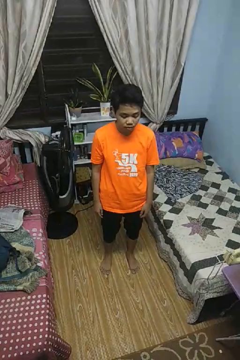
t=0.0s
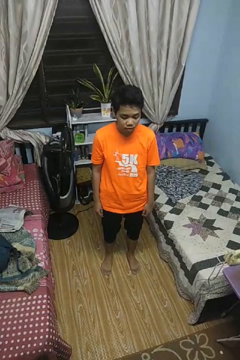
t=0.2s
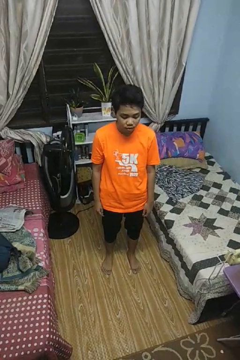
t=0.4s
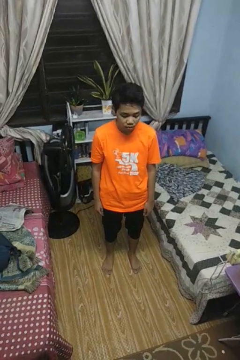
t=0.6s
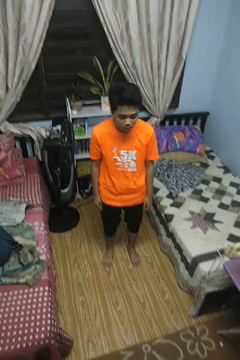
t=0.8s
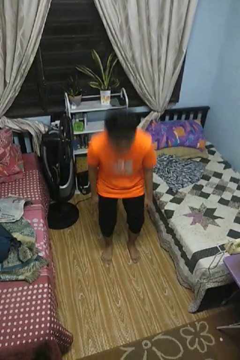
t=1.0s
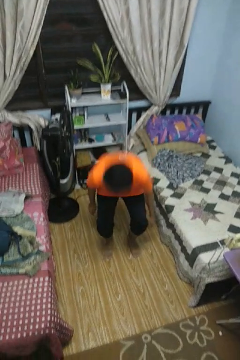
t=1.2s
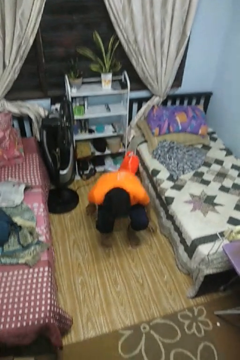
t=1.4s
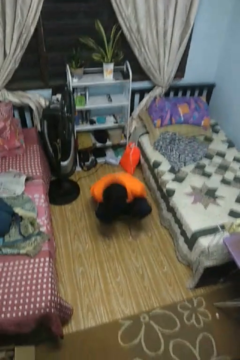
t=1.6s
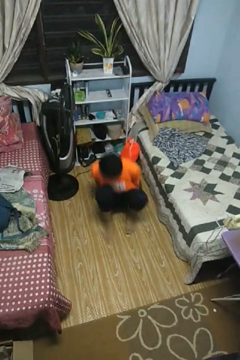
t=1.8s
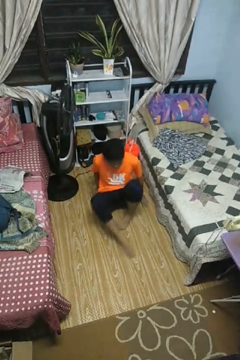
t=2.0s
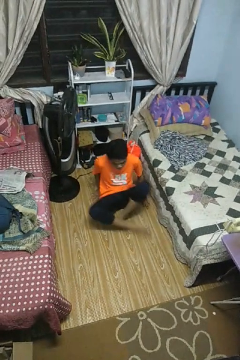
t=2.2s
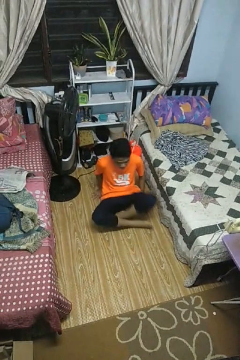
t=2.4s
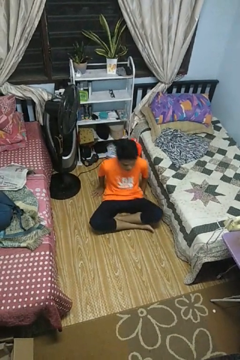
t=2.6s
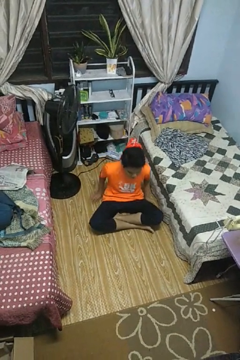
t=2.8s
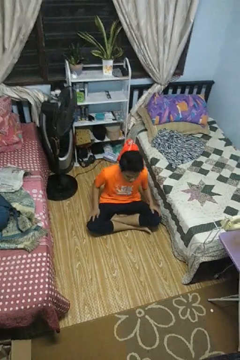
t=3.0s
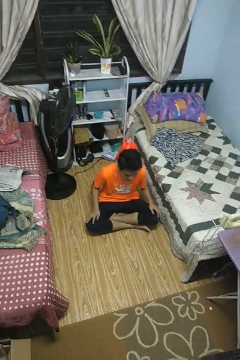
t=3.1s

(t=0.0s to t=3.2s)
person sits crisscross

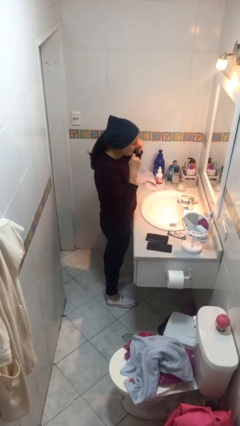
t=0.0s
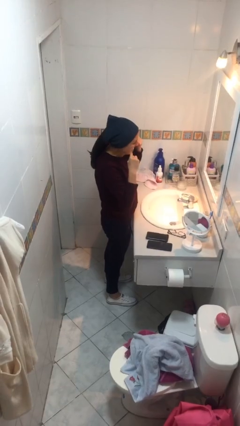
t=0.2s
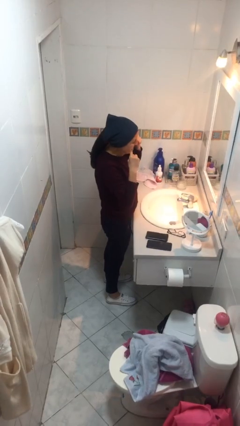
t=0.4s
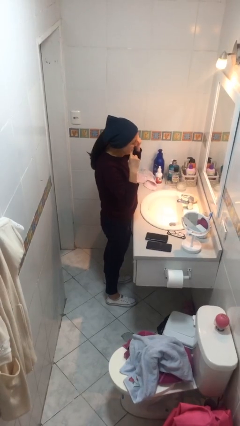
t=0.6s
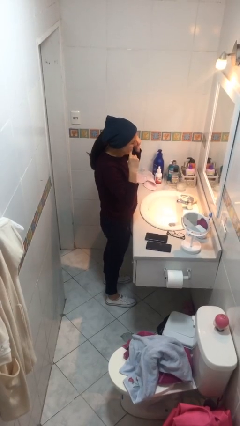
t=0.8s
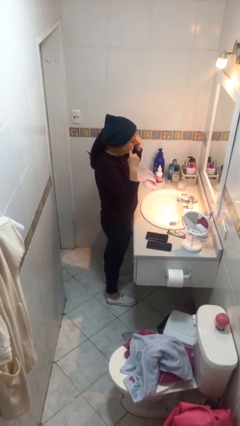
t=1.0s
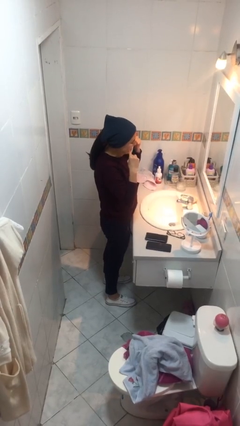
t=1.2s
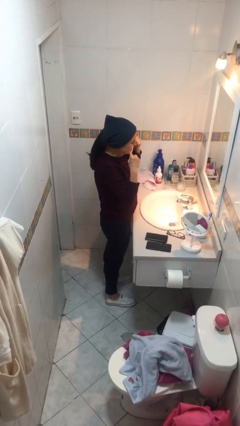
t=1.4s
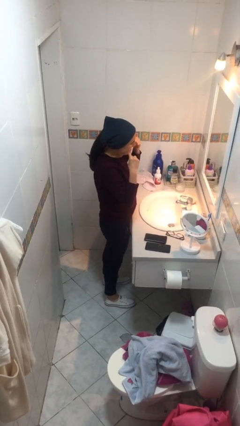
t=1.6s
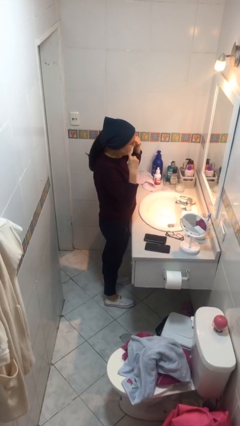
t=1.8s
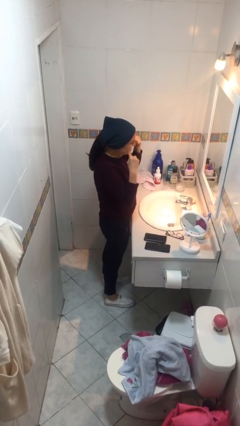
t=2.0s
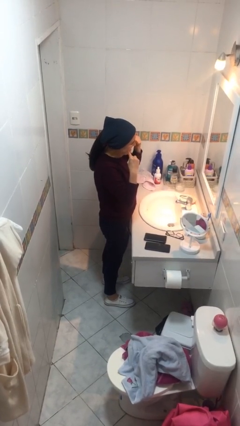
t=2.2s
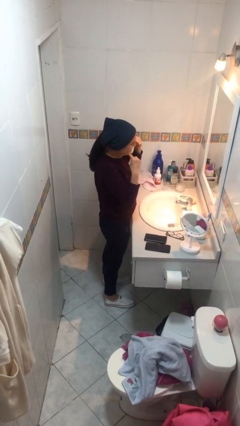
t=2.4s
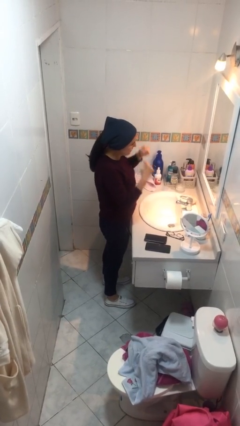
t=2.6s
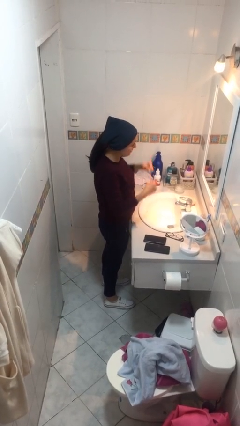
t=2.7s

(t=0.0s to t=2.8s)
person flosses

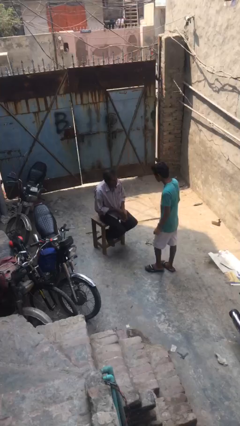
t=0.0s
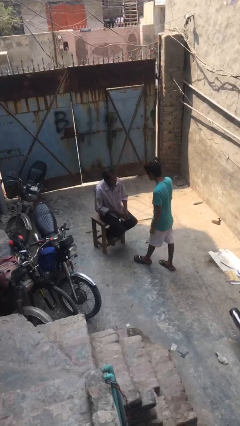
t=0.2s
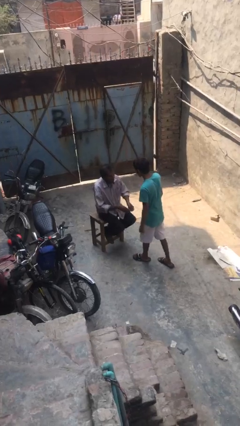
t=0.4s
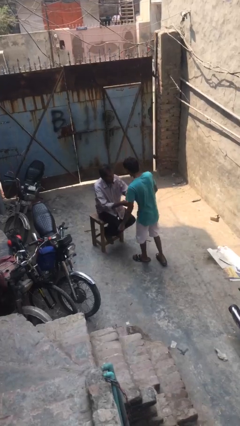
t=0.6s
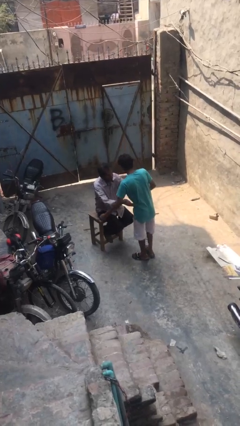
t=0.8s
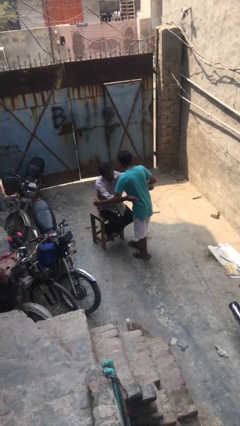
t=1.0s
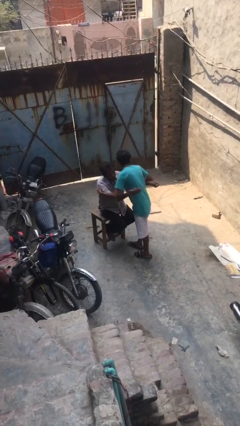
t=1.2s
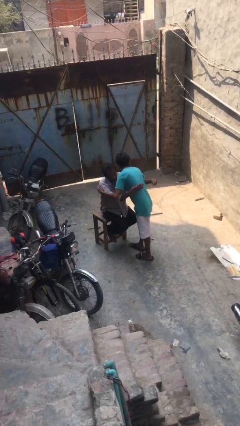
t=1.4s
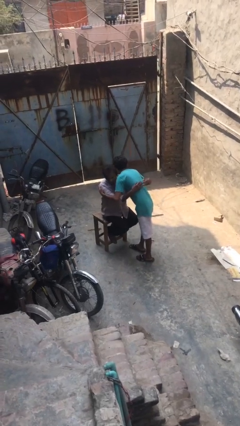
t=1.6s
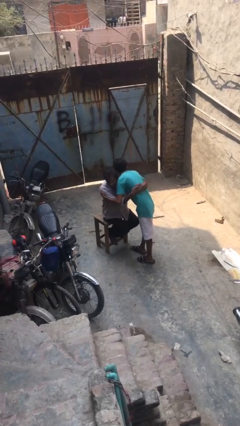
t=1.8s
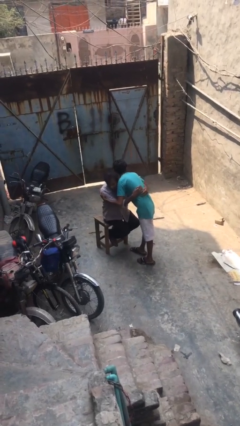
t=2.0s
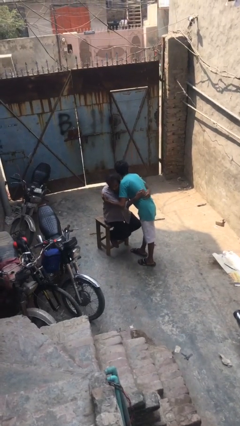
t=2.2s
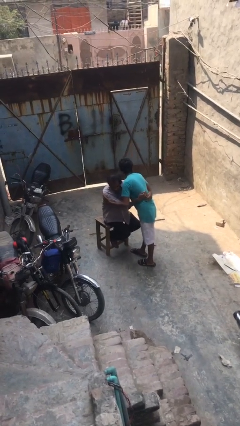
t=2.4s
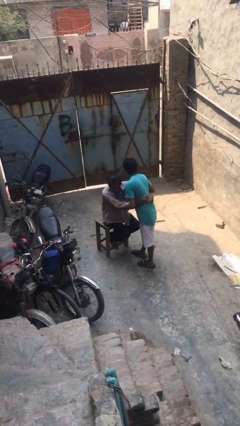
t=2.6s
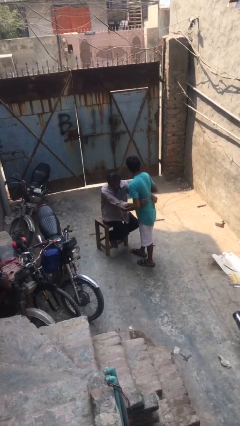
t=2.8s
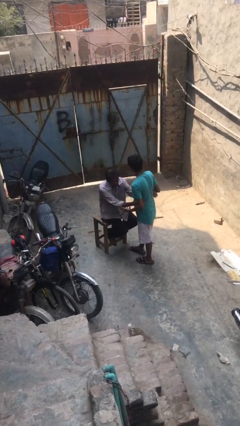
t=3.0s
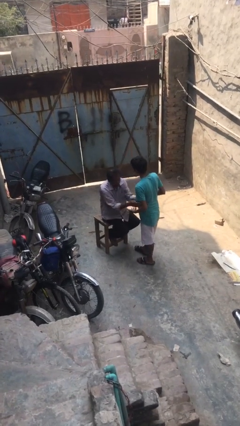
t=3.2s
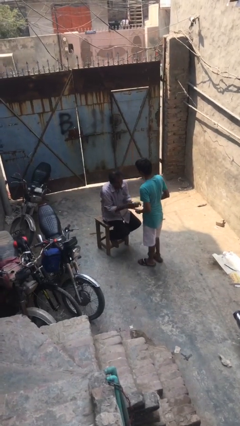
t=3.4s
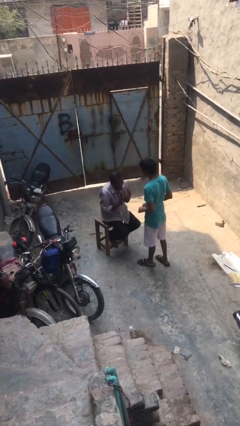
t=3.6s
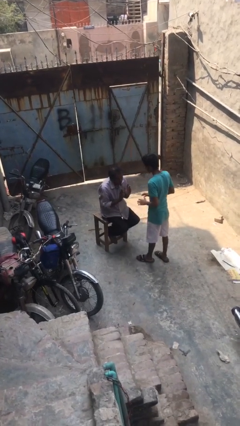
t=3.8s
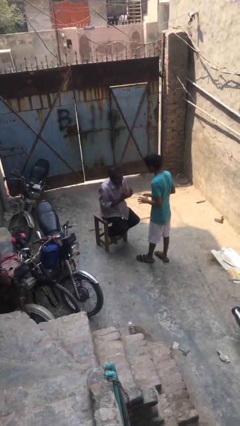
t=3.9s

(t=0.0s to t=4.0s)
person embraces person

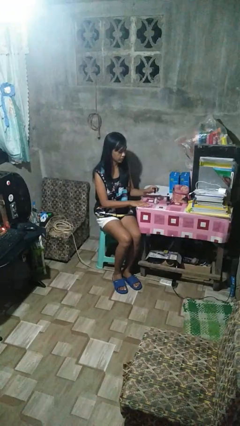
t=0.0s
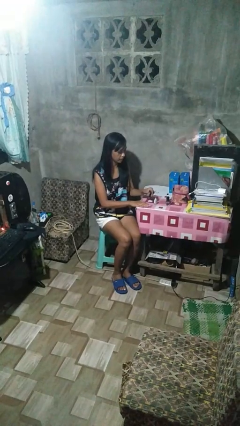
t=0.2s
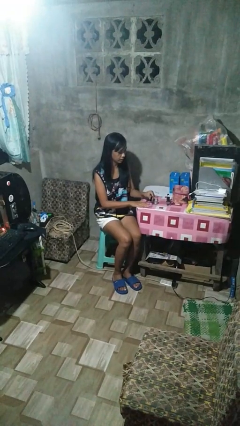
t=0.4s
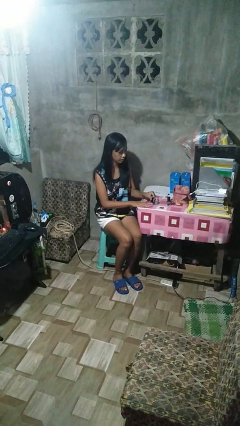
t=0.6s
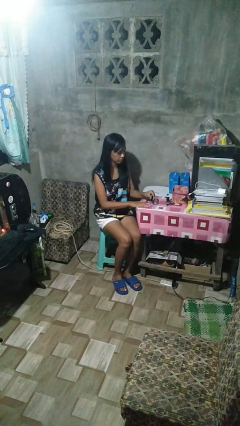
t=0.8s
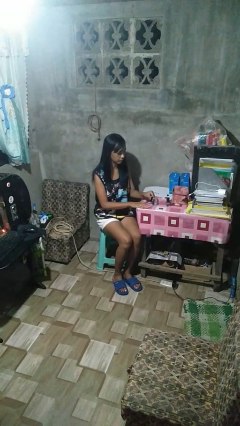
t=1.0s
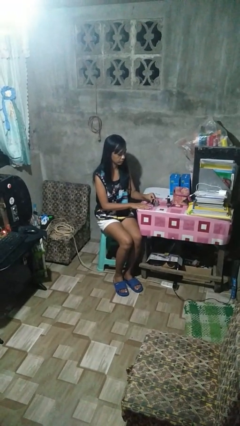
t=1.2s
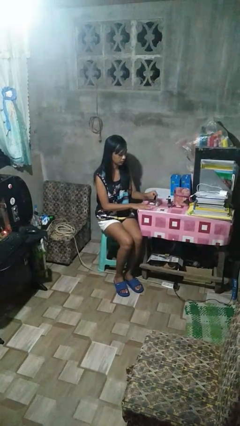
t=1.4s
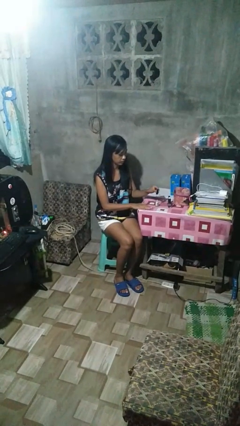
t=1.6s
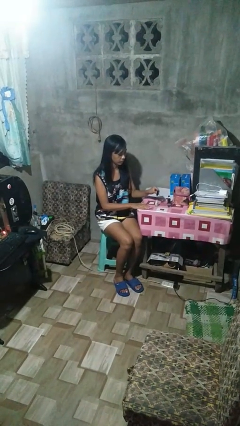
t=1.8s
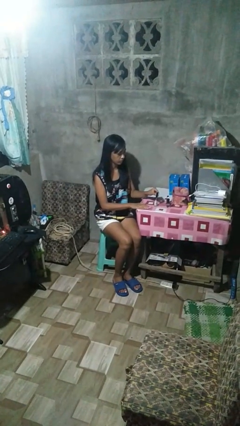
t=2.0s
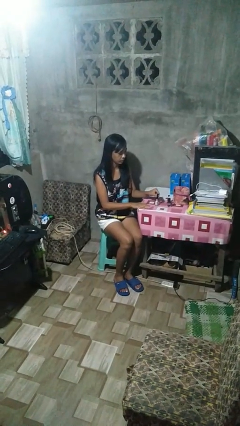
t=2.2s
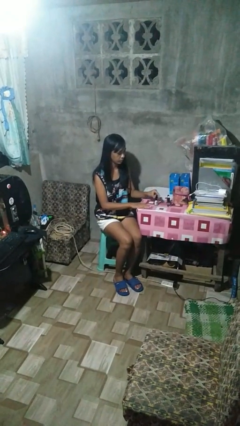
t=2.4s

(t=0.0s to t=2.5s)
person paints fingernails

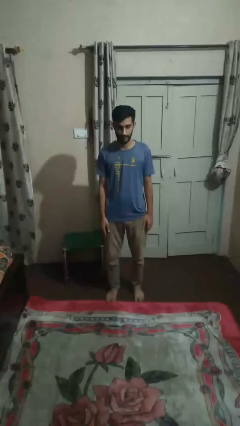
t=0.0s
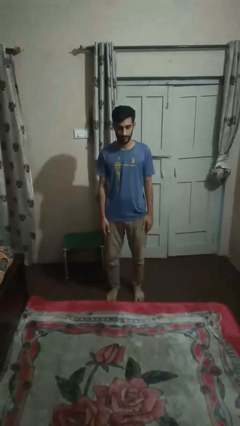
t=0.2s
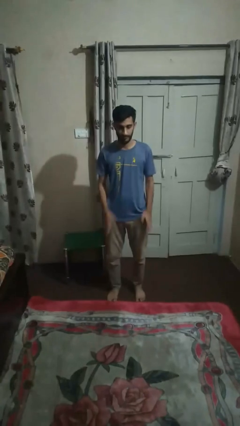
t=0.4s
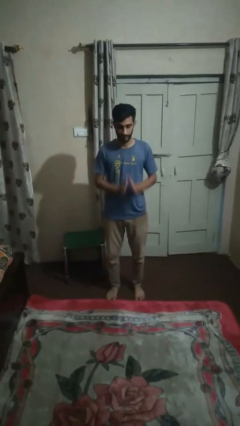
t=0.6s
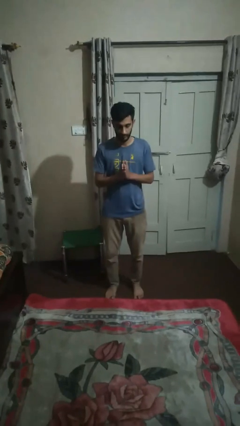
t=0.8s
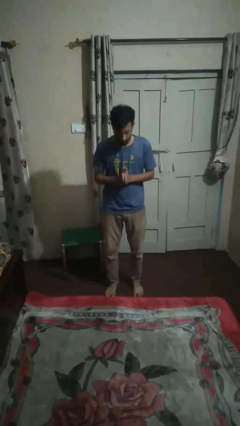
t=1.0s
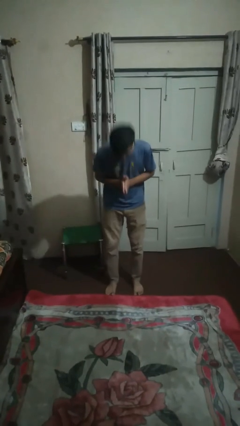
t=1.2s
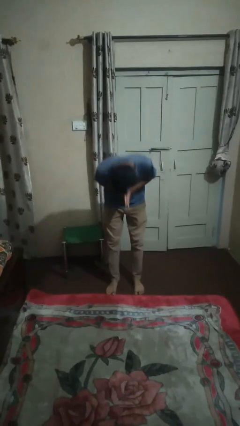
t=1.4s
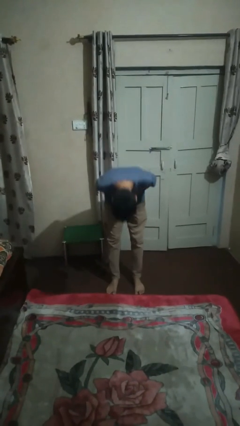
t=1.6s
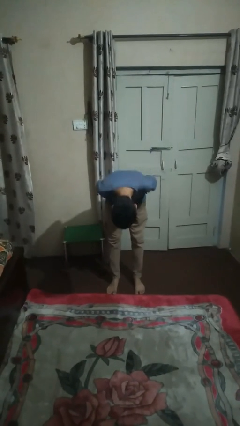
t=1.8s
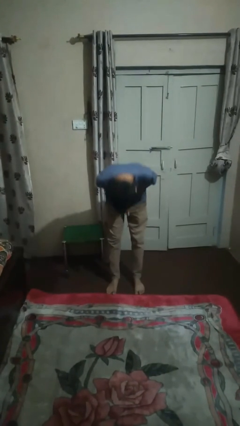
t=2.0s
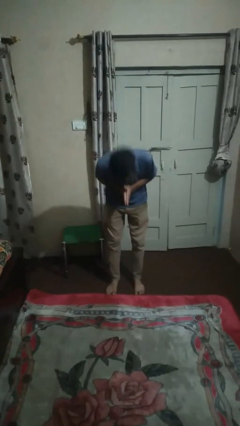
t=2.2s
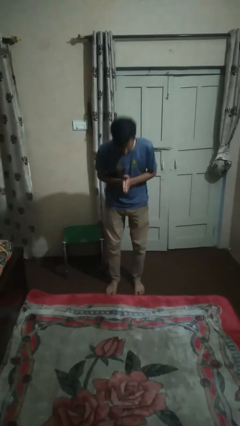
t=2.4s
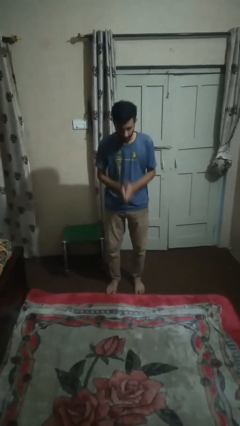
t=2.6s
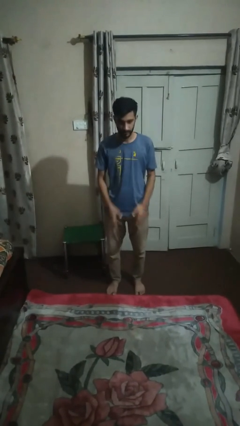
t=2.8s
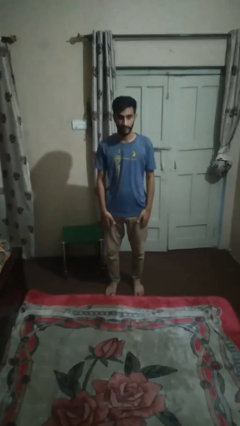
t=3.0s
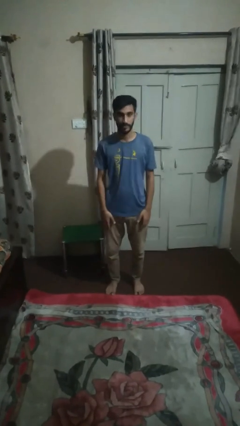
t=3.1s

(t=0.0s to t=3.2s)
person bows

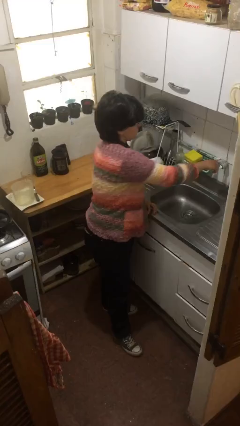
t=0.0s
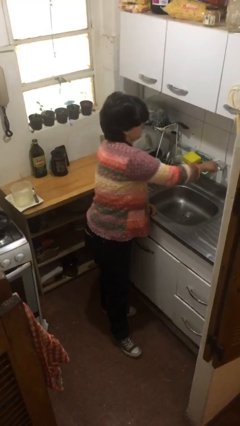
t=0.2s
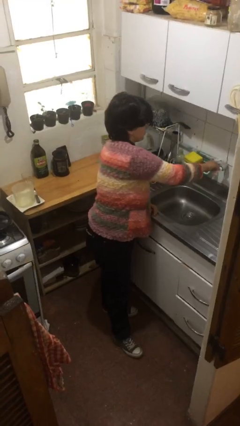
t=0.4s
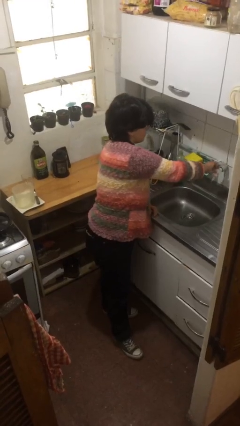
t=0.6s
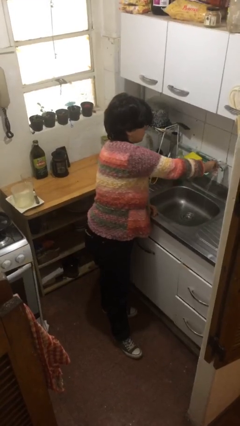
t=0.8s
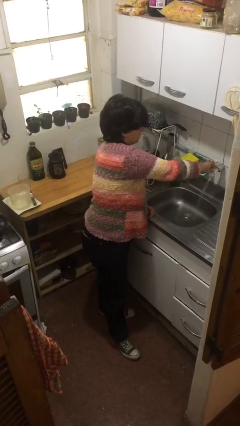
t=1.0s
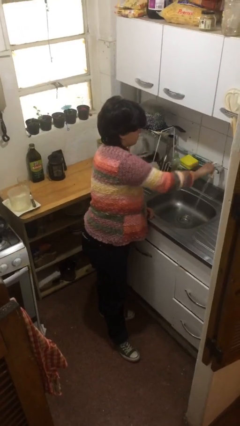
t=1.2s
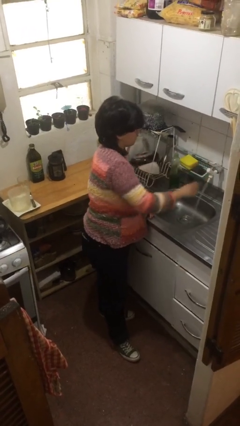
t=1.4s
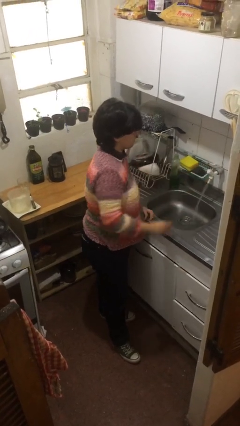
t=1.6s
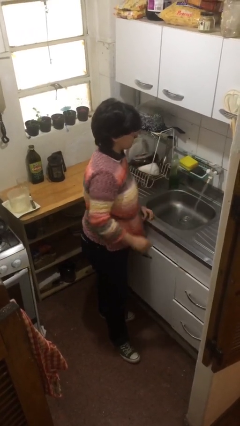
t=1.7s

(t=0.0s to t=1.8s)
person turns on faucet

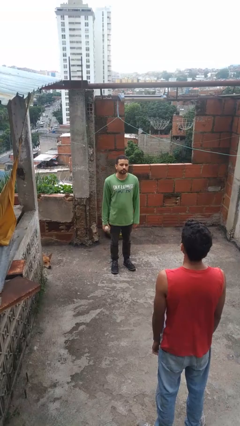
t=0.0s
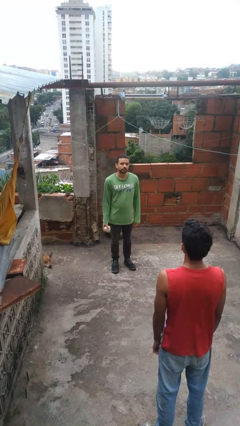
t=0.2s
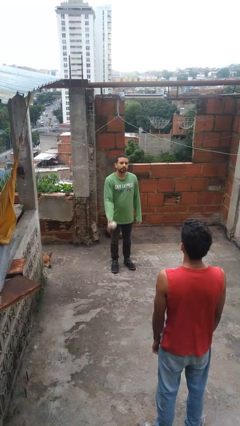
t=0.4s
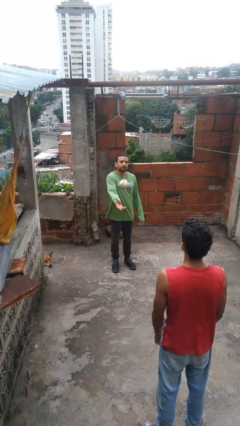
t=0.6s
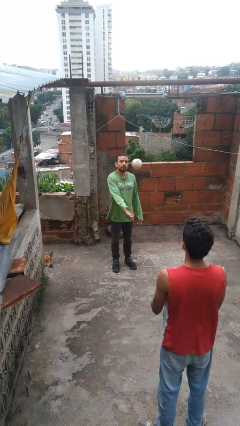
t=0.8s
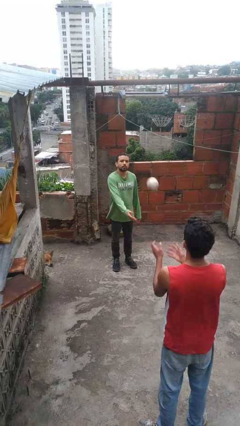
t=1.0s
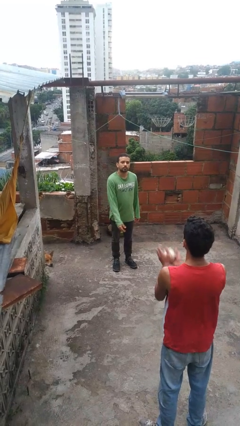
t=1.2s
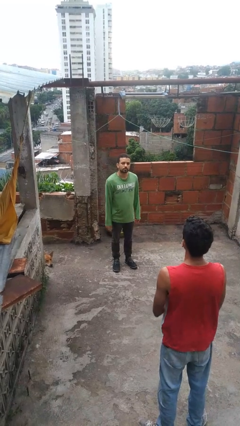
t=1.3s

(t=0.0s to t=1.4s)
person throws object to person
